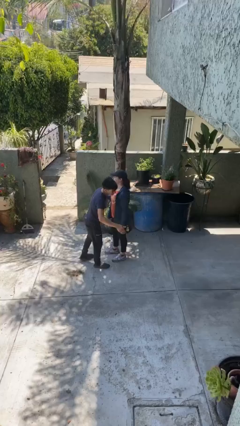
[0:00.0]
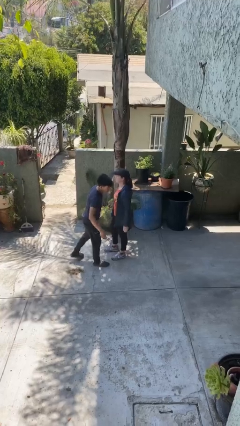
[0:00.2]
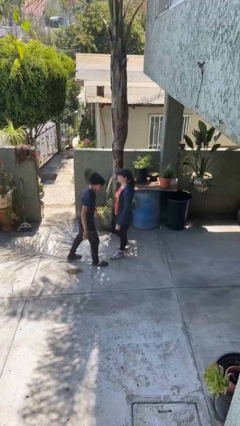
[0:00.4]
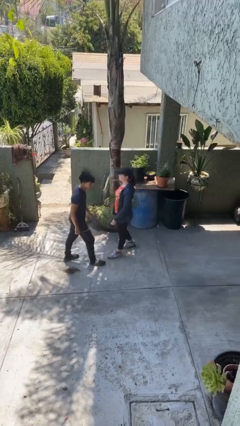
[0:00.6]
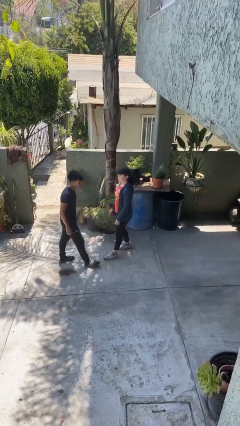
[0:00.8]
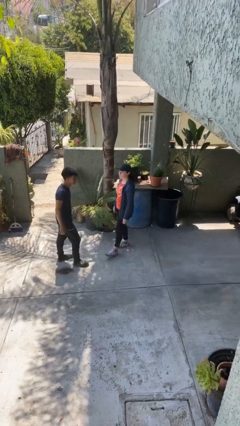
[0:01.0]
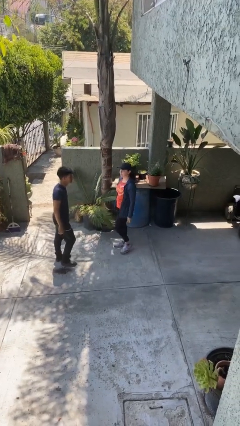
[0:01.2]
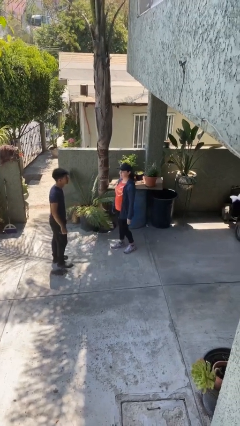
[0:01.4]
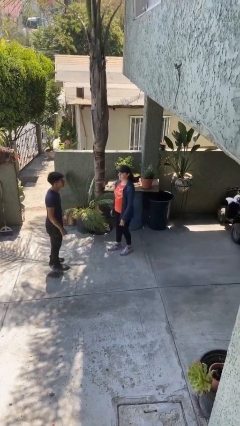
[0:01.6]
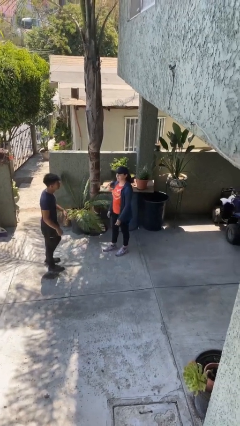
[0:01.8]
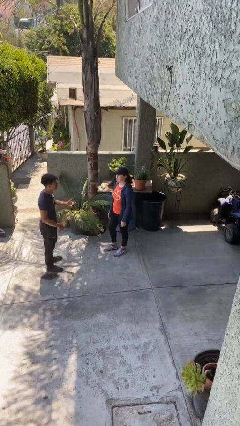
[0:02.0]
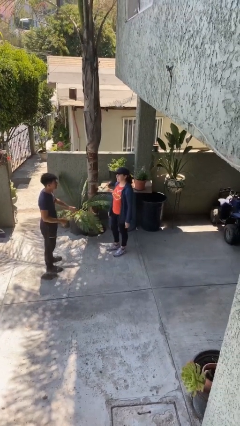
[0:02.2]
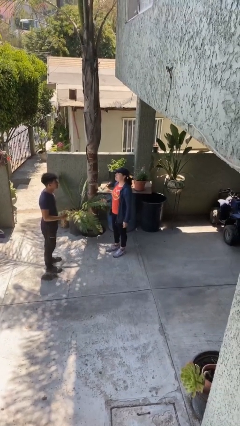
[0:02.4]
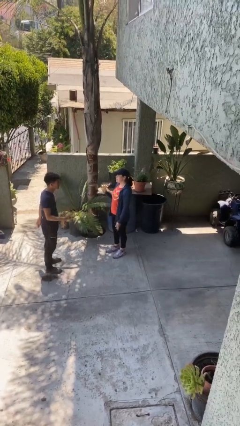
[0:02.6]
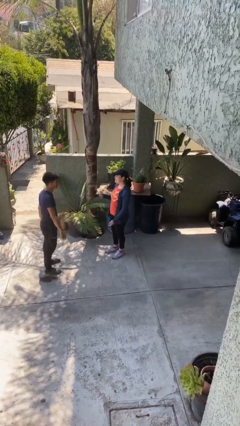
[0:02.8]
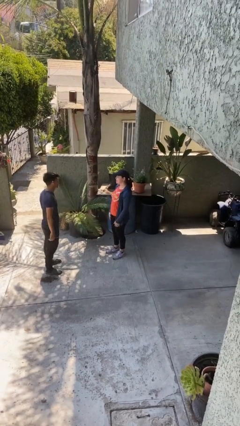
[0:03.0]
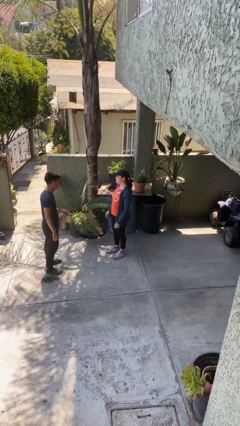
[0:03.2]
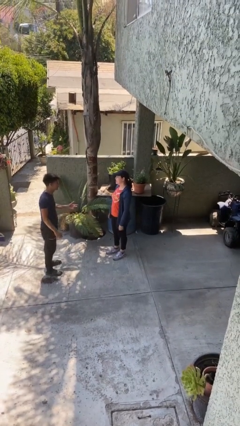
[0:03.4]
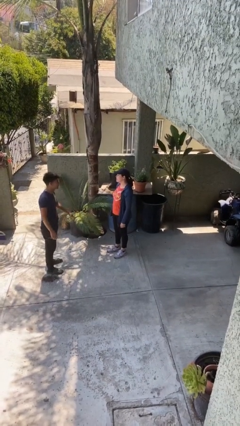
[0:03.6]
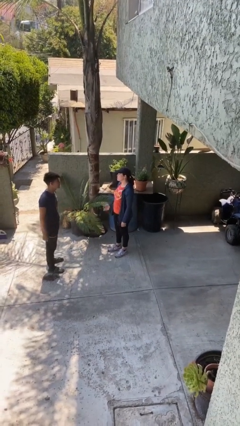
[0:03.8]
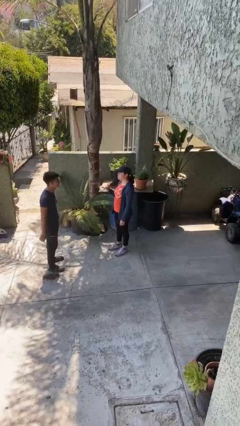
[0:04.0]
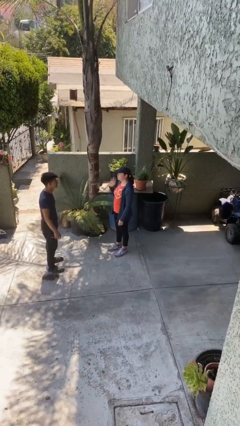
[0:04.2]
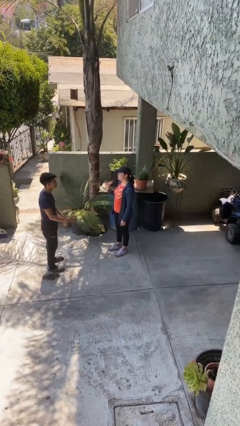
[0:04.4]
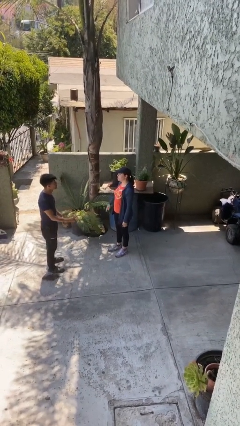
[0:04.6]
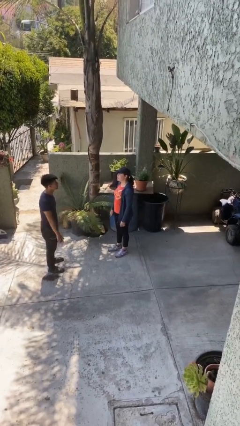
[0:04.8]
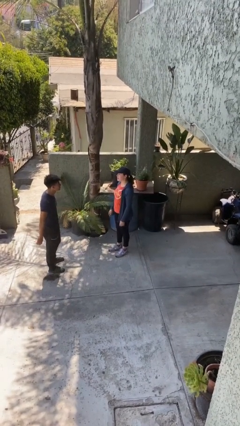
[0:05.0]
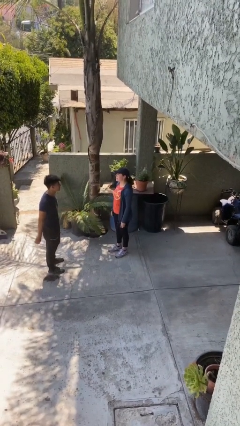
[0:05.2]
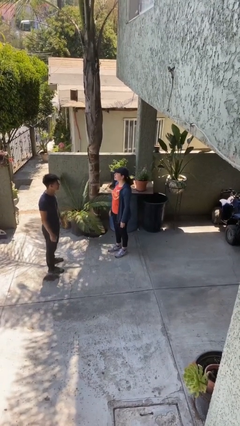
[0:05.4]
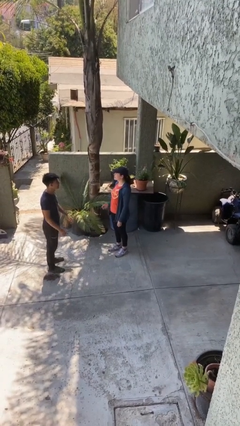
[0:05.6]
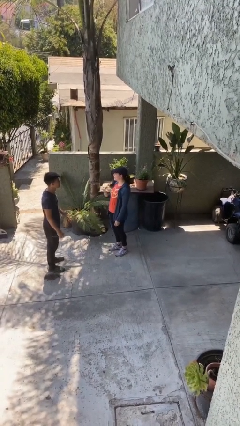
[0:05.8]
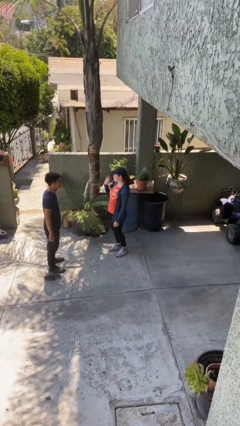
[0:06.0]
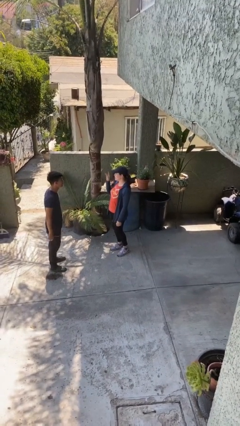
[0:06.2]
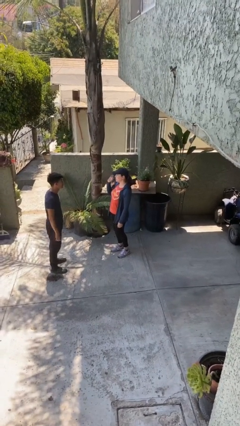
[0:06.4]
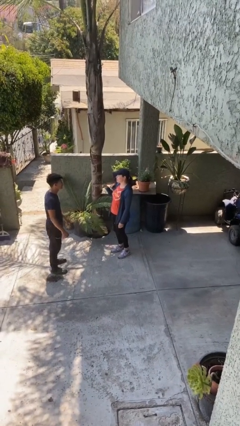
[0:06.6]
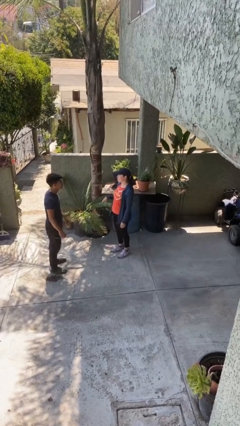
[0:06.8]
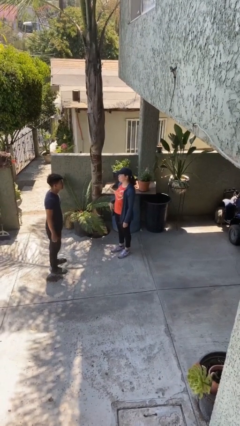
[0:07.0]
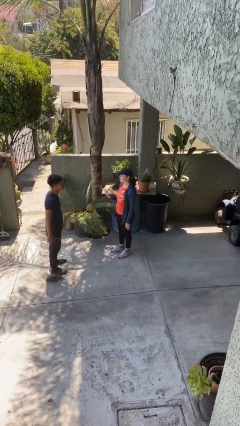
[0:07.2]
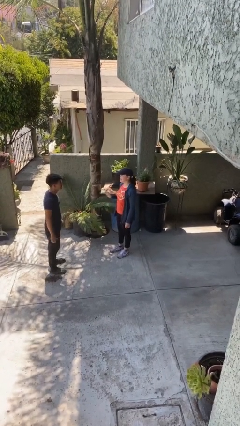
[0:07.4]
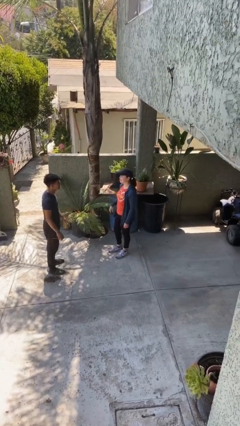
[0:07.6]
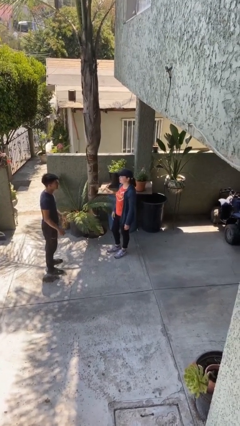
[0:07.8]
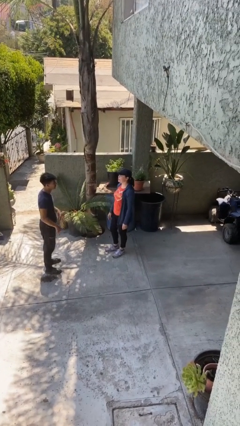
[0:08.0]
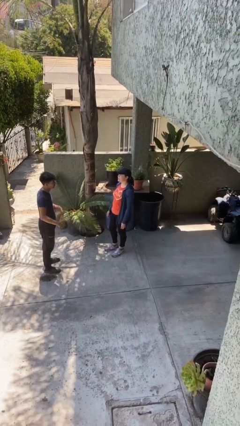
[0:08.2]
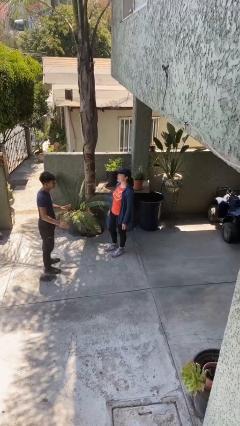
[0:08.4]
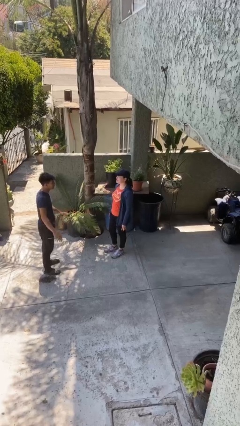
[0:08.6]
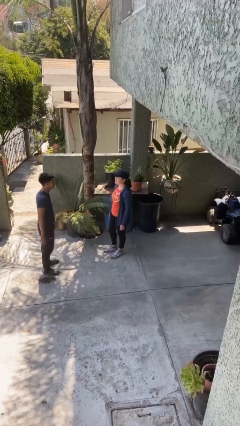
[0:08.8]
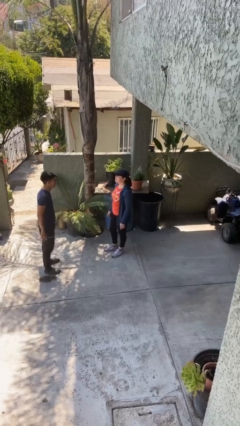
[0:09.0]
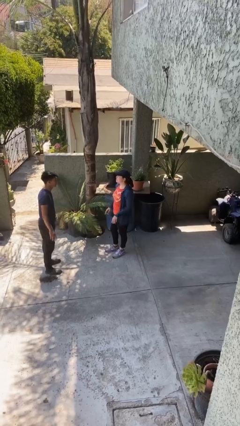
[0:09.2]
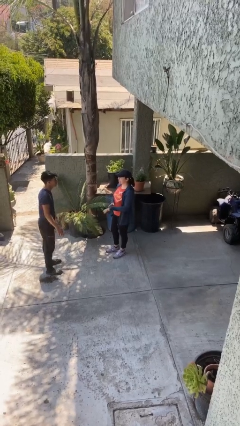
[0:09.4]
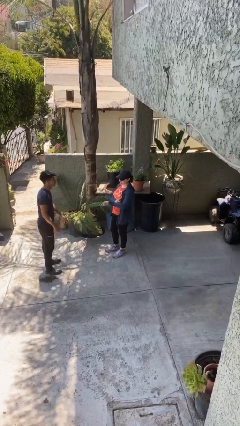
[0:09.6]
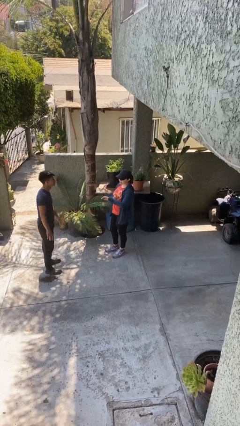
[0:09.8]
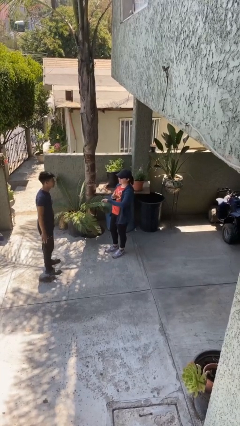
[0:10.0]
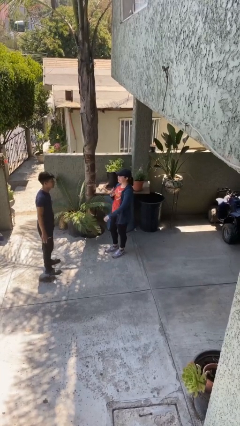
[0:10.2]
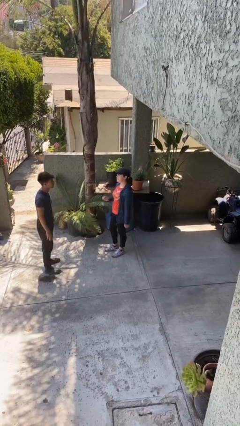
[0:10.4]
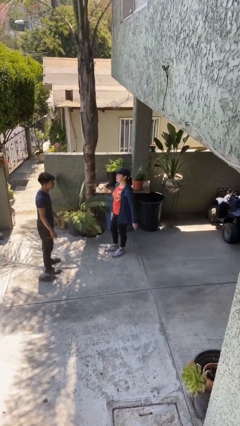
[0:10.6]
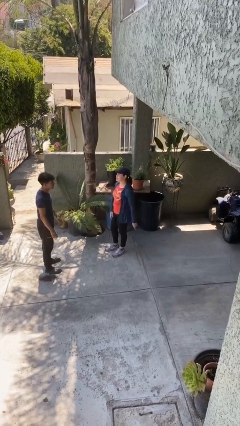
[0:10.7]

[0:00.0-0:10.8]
person talks to person

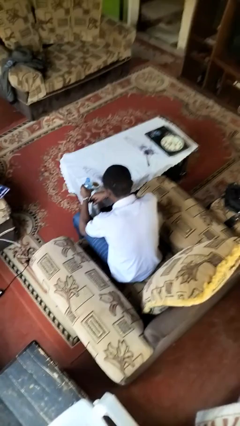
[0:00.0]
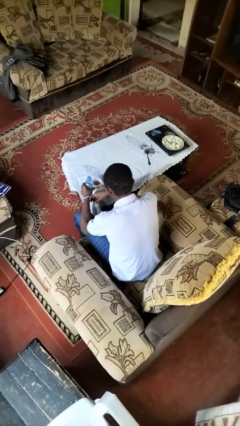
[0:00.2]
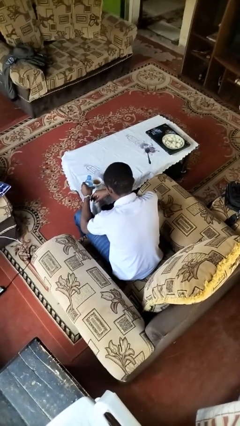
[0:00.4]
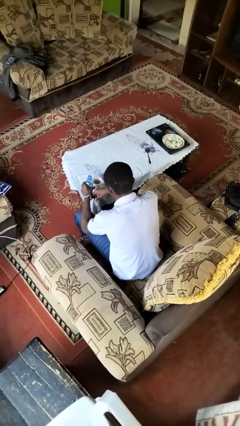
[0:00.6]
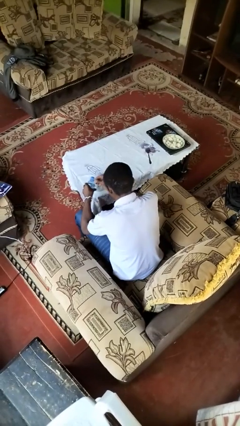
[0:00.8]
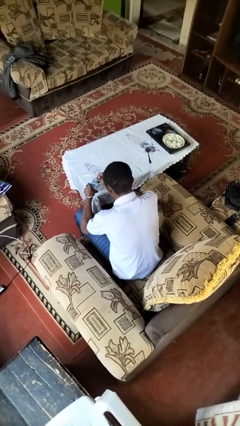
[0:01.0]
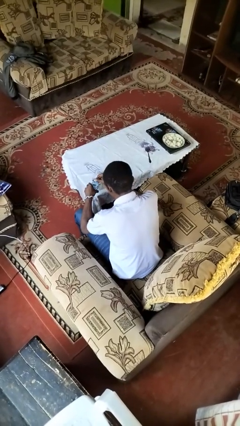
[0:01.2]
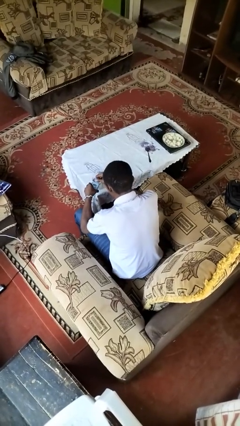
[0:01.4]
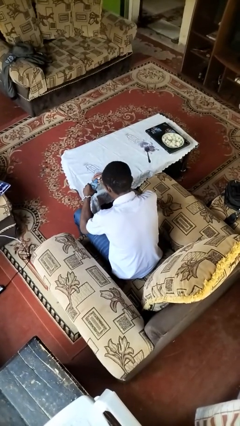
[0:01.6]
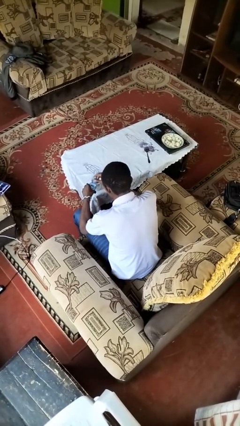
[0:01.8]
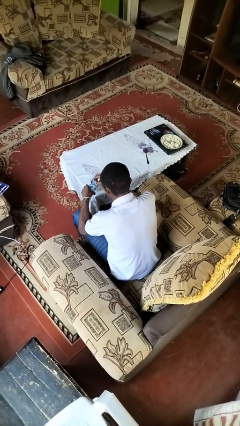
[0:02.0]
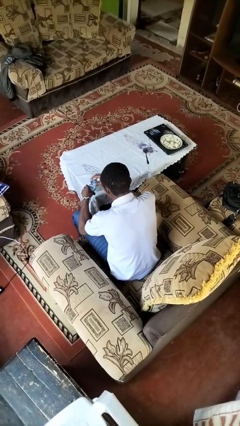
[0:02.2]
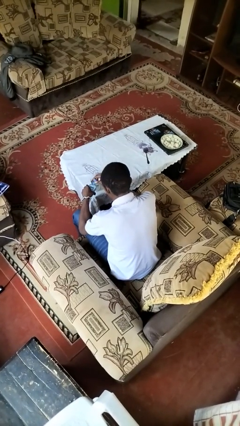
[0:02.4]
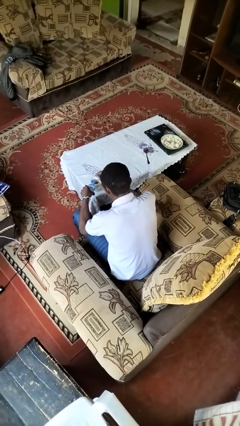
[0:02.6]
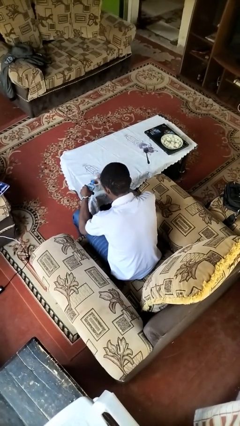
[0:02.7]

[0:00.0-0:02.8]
person unscrews lid from bottle

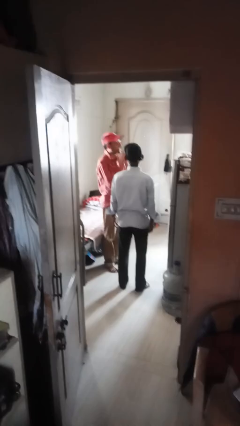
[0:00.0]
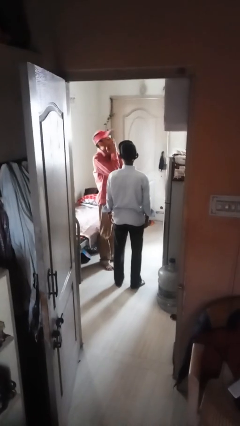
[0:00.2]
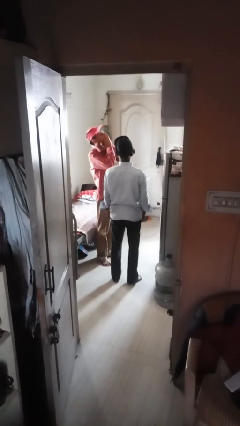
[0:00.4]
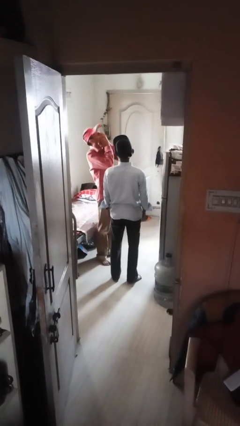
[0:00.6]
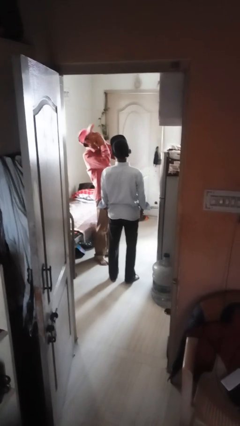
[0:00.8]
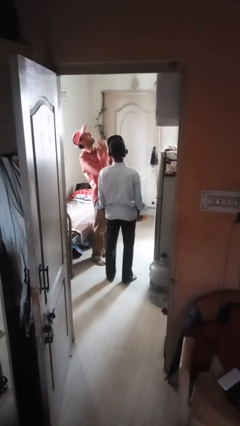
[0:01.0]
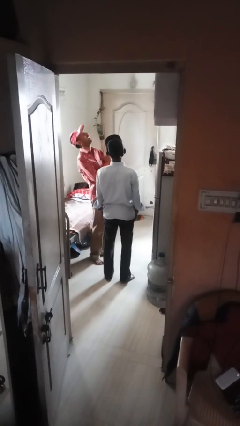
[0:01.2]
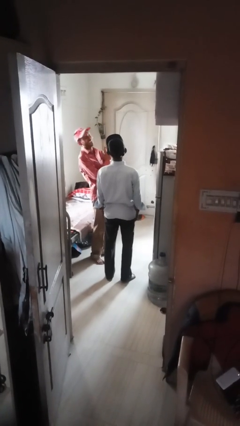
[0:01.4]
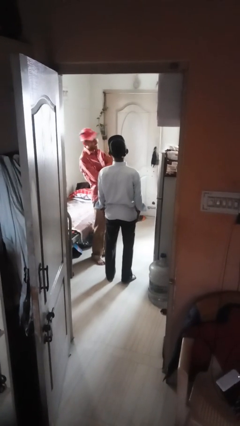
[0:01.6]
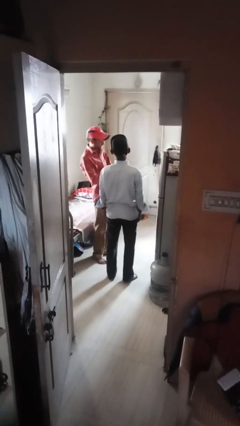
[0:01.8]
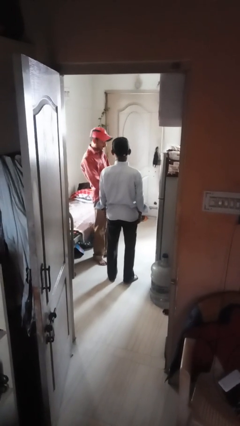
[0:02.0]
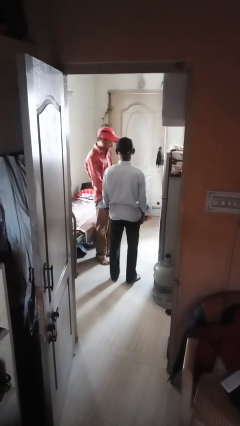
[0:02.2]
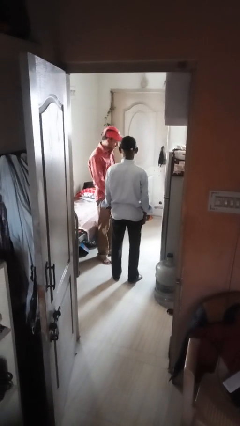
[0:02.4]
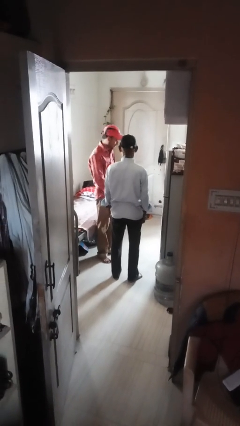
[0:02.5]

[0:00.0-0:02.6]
person laughs with person

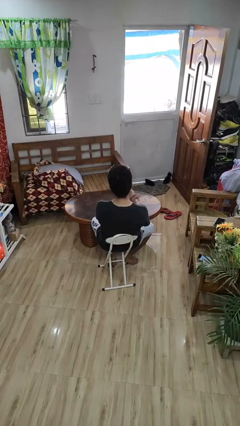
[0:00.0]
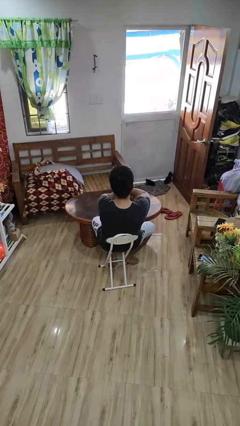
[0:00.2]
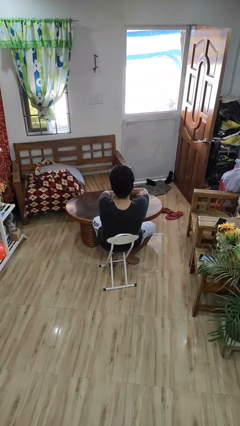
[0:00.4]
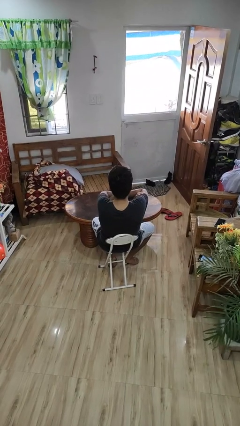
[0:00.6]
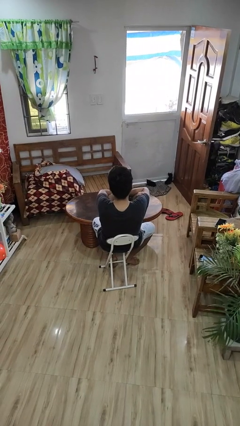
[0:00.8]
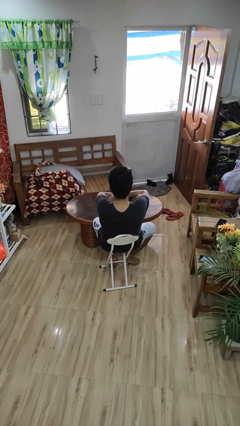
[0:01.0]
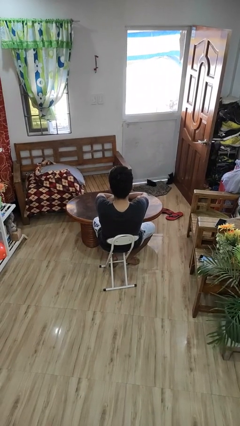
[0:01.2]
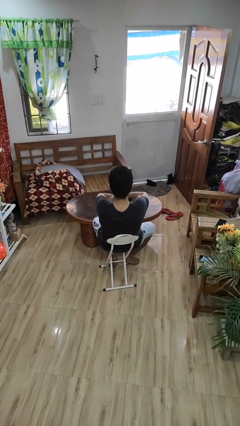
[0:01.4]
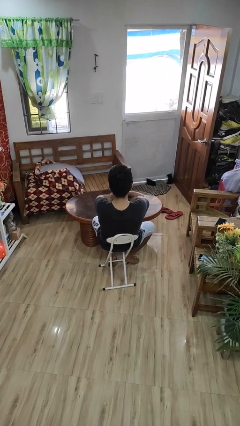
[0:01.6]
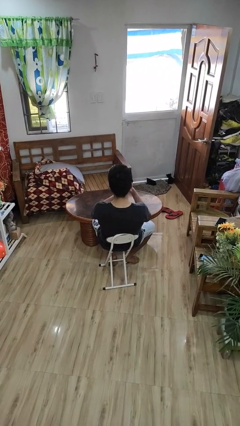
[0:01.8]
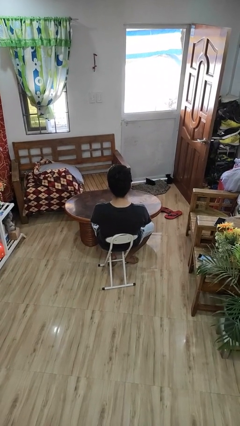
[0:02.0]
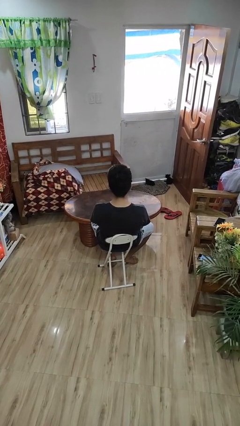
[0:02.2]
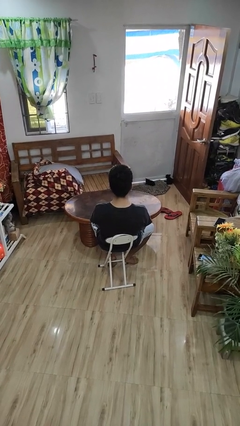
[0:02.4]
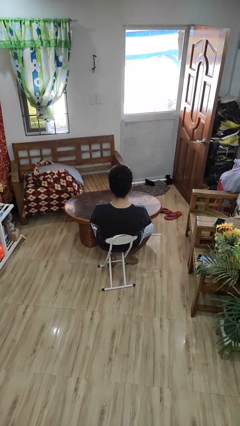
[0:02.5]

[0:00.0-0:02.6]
person crosses arms
